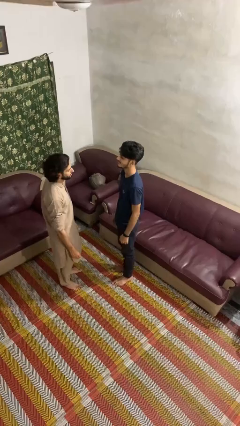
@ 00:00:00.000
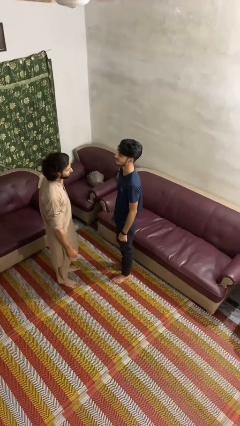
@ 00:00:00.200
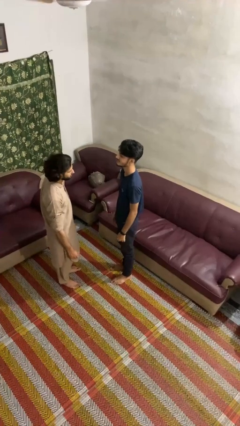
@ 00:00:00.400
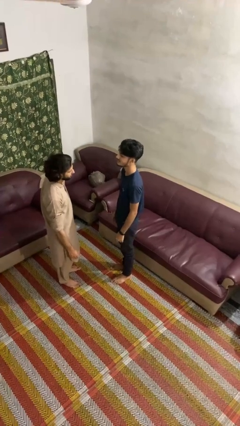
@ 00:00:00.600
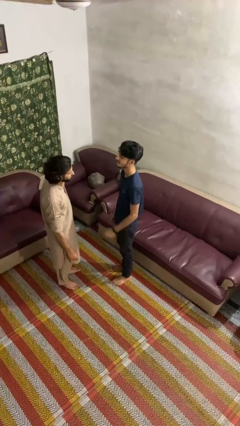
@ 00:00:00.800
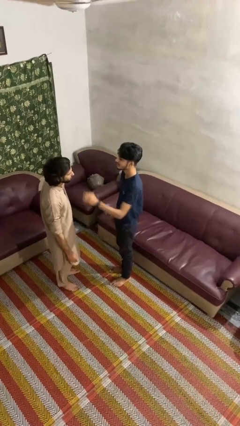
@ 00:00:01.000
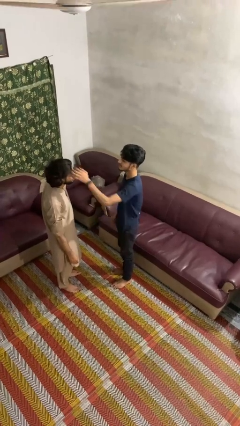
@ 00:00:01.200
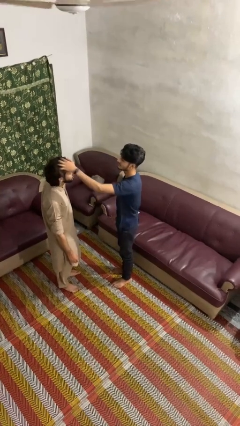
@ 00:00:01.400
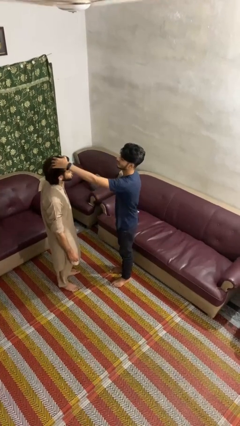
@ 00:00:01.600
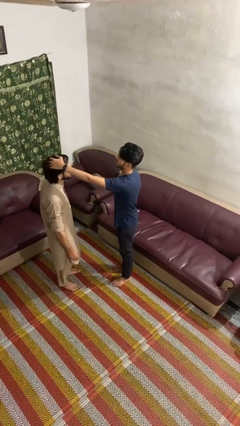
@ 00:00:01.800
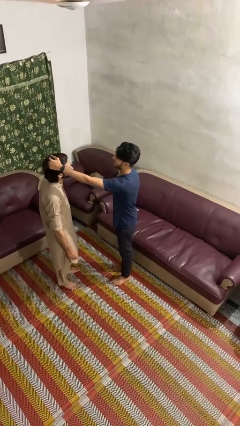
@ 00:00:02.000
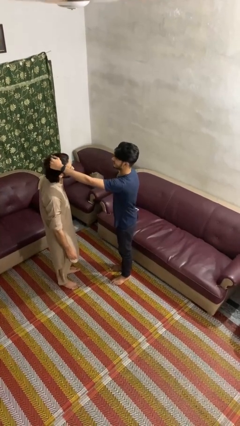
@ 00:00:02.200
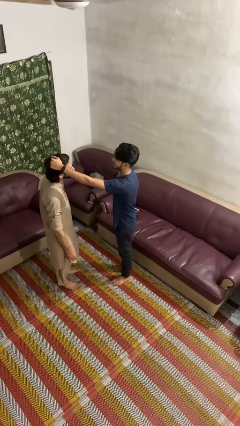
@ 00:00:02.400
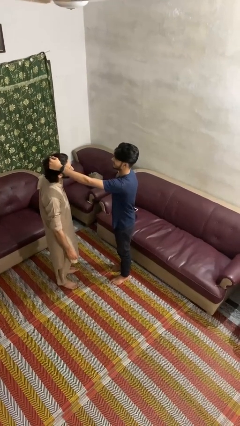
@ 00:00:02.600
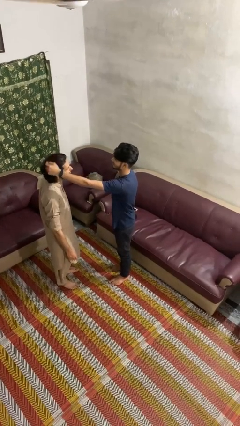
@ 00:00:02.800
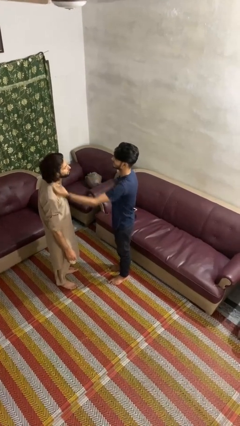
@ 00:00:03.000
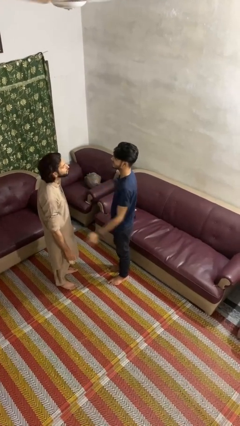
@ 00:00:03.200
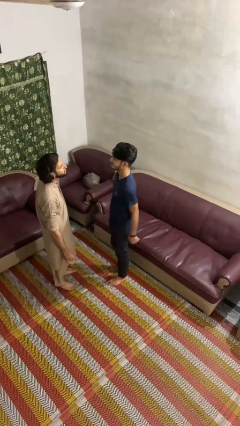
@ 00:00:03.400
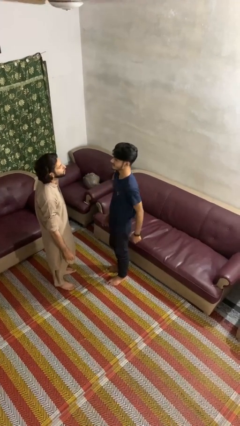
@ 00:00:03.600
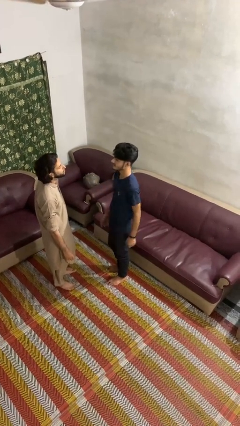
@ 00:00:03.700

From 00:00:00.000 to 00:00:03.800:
person grabs person by hair

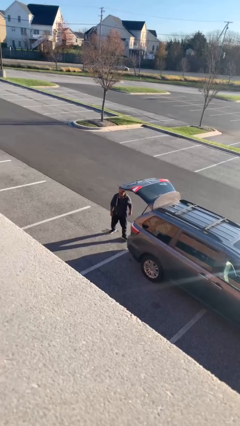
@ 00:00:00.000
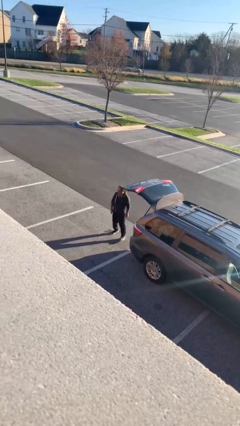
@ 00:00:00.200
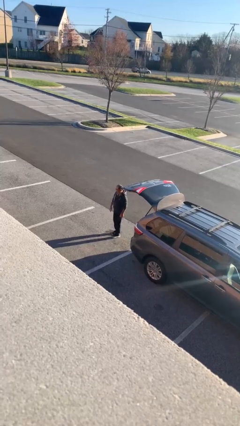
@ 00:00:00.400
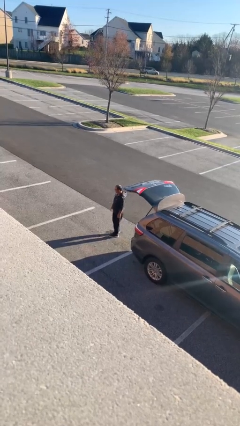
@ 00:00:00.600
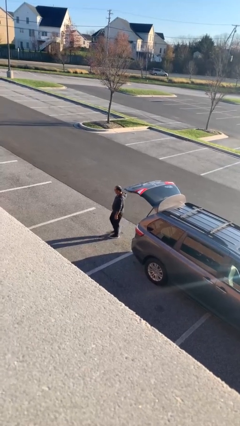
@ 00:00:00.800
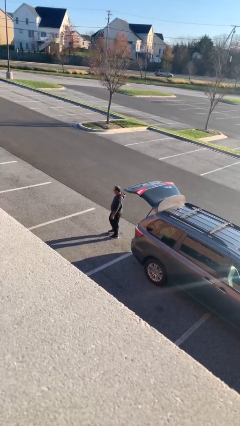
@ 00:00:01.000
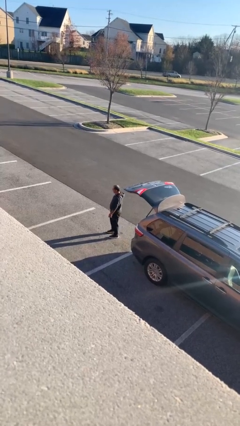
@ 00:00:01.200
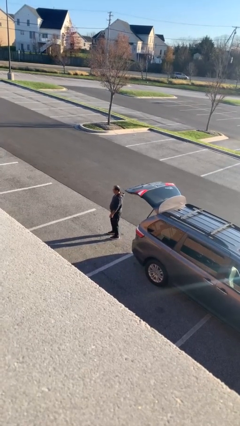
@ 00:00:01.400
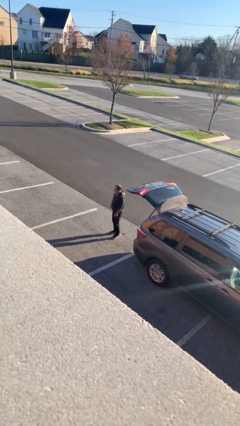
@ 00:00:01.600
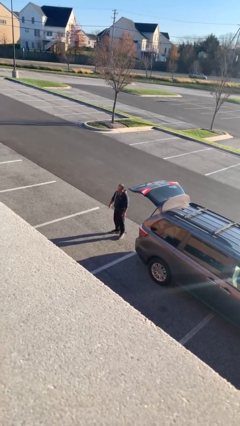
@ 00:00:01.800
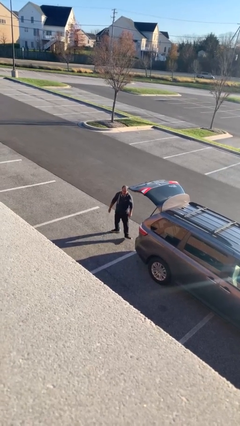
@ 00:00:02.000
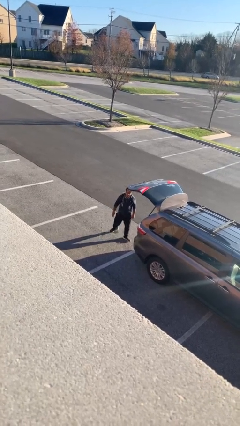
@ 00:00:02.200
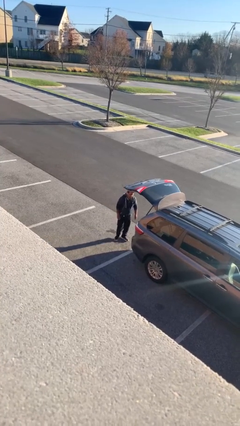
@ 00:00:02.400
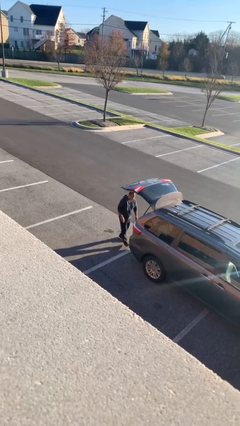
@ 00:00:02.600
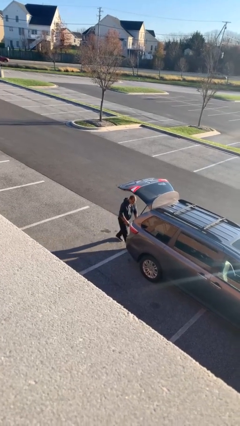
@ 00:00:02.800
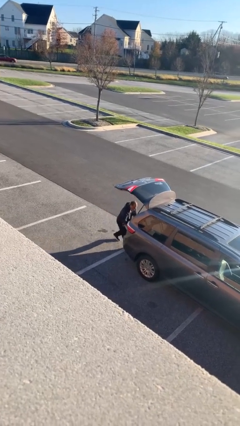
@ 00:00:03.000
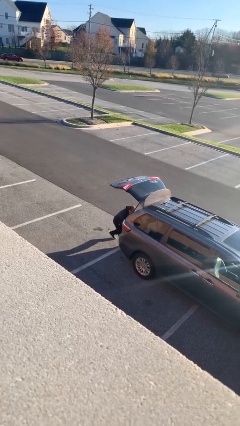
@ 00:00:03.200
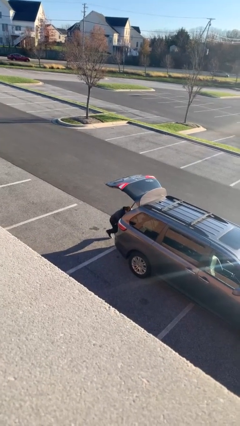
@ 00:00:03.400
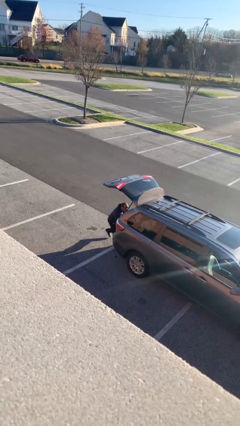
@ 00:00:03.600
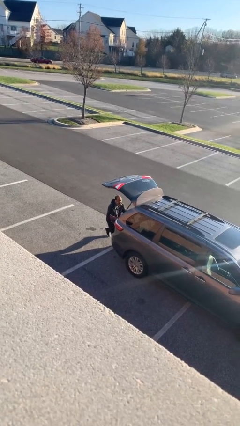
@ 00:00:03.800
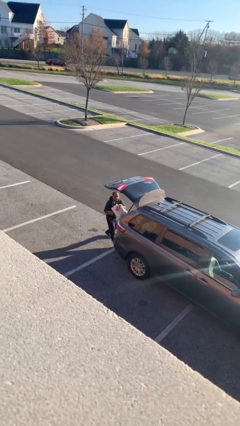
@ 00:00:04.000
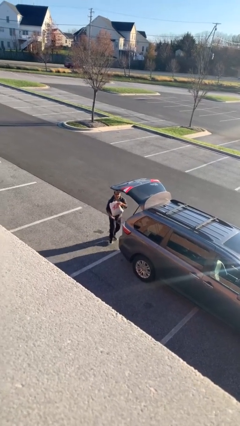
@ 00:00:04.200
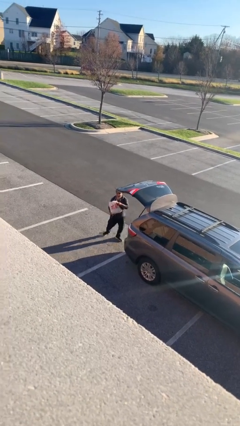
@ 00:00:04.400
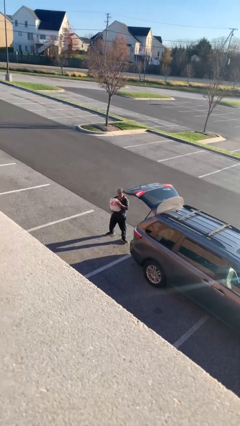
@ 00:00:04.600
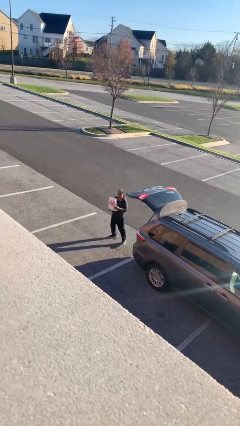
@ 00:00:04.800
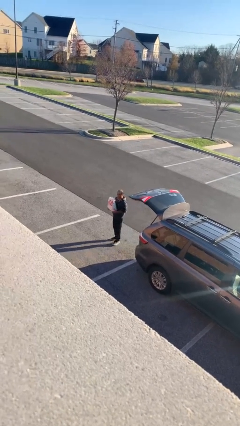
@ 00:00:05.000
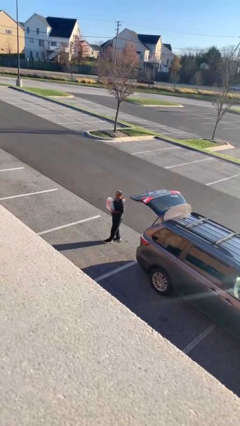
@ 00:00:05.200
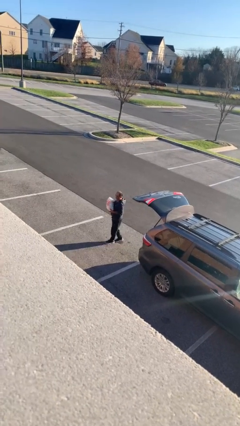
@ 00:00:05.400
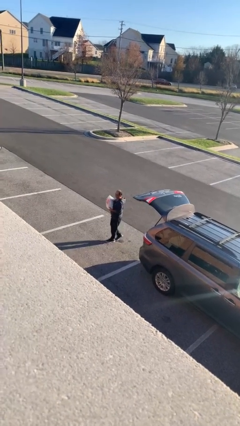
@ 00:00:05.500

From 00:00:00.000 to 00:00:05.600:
person unloads car

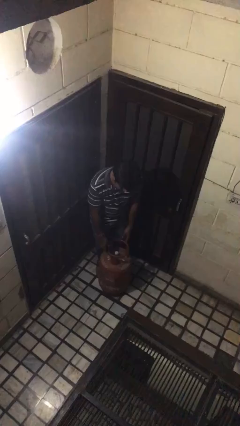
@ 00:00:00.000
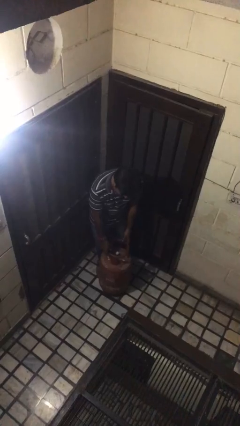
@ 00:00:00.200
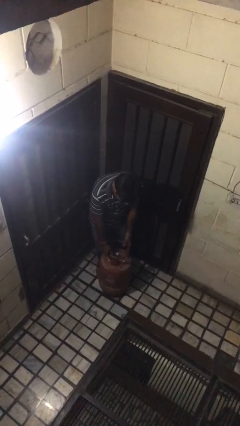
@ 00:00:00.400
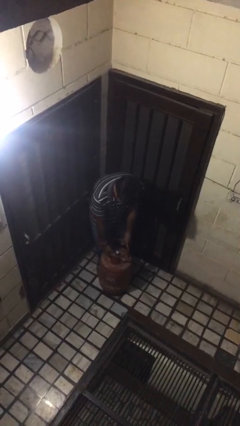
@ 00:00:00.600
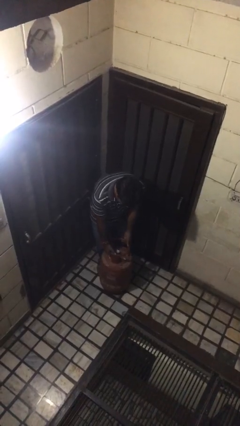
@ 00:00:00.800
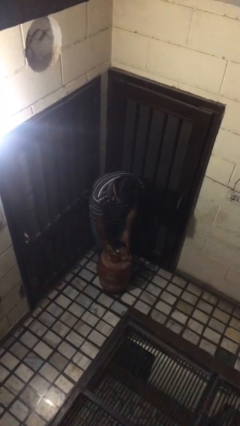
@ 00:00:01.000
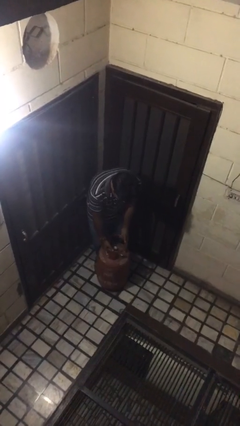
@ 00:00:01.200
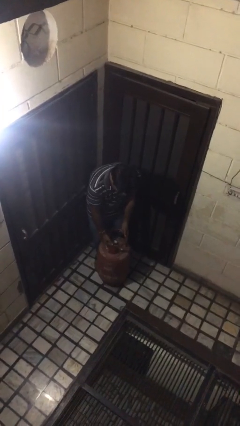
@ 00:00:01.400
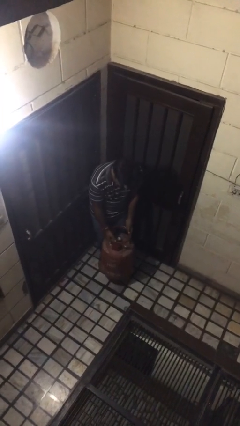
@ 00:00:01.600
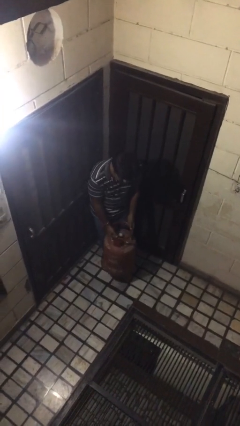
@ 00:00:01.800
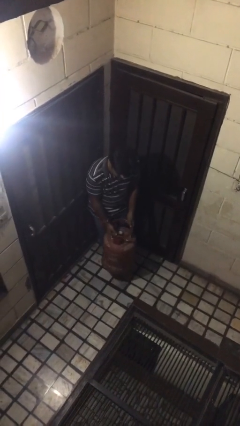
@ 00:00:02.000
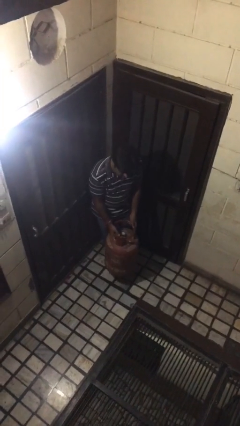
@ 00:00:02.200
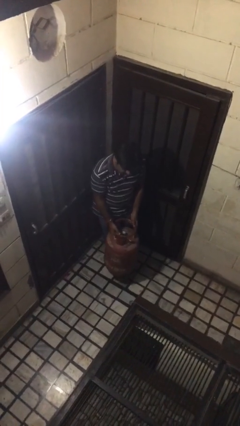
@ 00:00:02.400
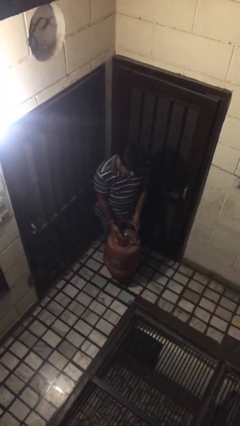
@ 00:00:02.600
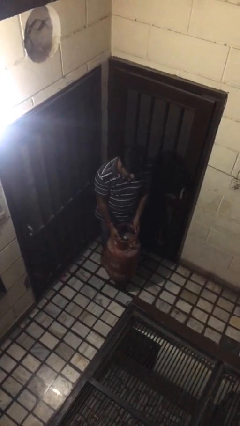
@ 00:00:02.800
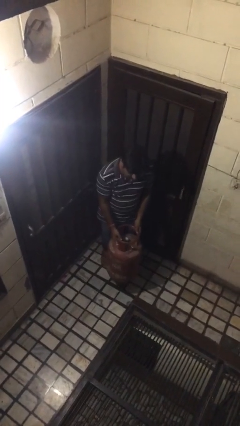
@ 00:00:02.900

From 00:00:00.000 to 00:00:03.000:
person picks up object from floor

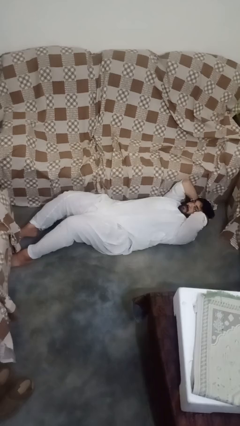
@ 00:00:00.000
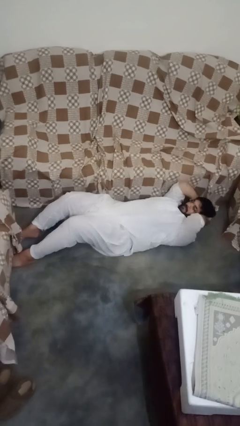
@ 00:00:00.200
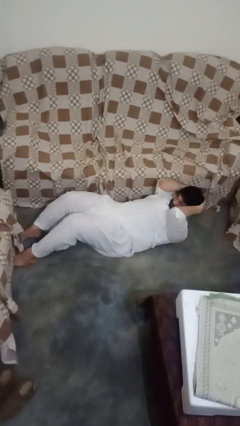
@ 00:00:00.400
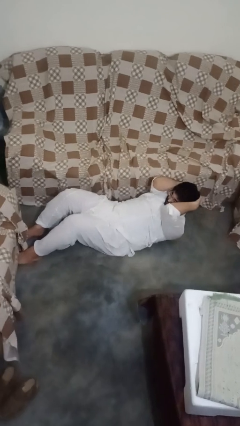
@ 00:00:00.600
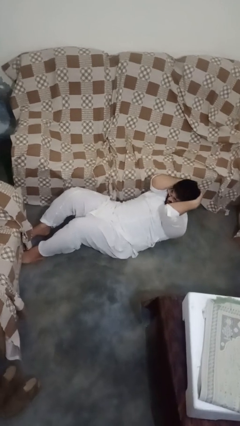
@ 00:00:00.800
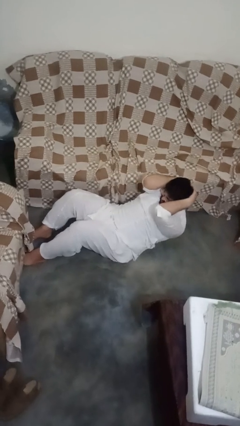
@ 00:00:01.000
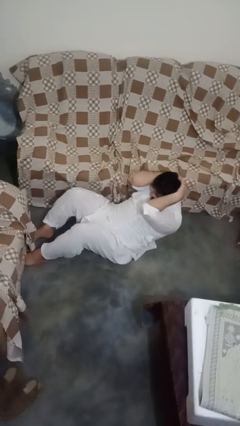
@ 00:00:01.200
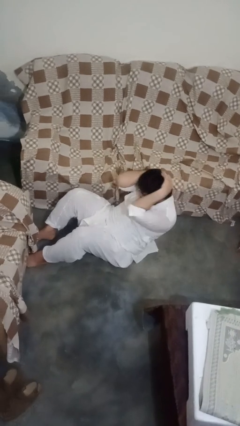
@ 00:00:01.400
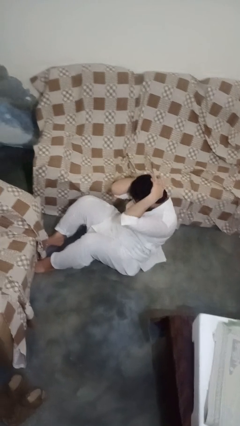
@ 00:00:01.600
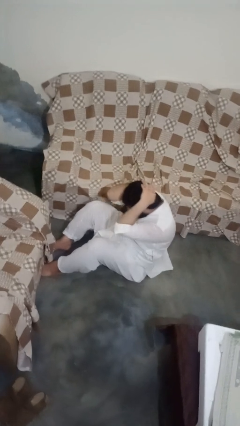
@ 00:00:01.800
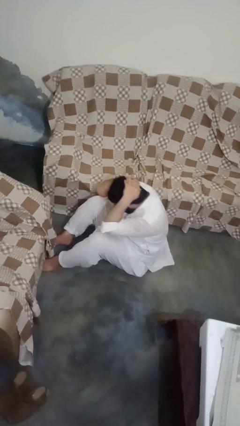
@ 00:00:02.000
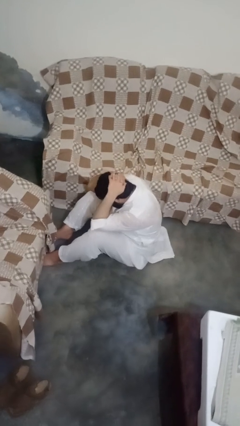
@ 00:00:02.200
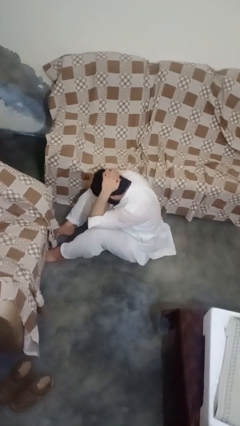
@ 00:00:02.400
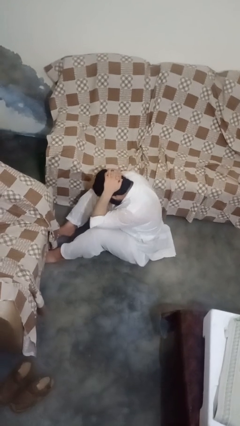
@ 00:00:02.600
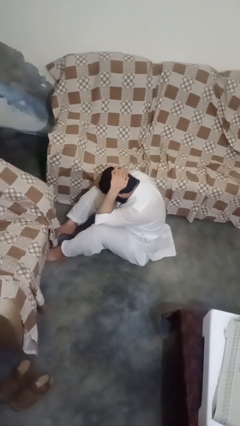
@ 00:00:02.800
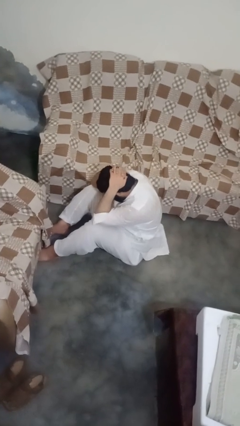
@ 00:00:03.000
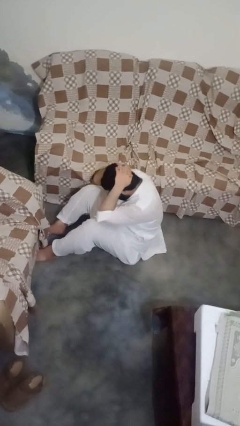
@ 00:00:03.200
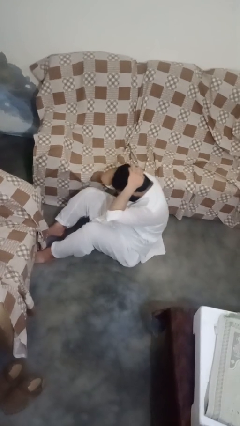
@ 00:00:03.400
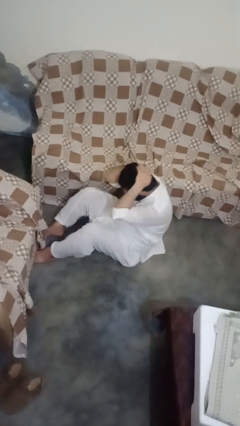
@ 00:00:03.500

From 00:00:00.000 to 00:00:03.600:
person exercises with situp

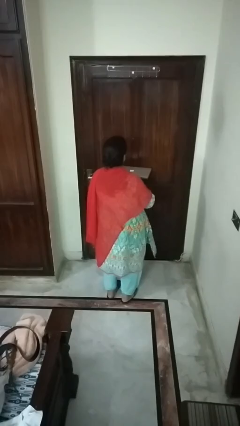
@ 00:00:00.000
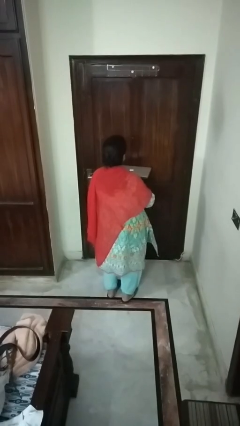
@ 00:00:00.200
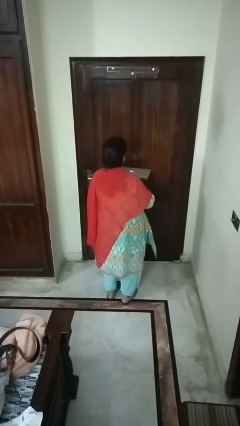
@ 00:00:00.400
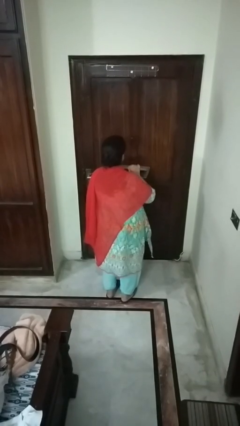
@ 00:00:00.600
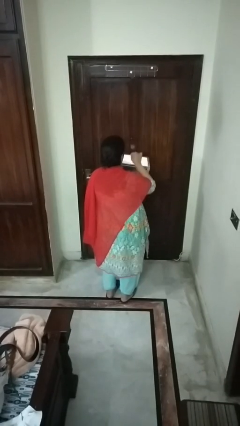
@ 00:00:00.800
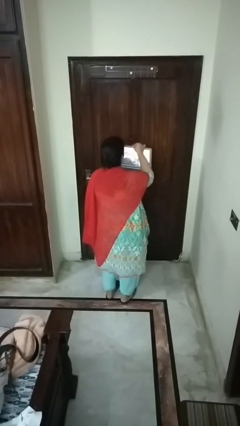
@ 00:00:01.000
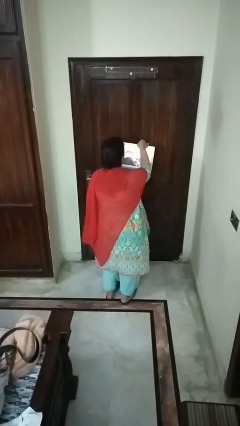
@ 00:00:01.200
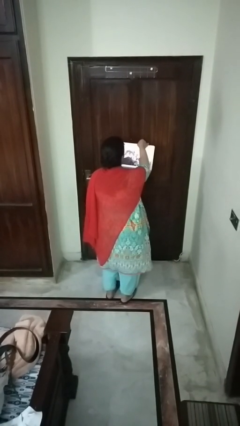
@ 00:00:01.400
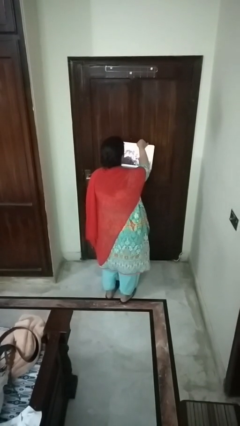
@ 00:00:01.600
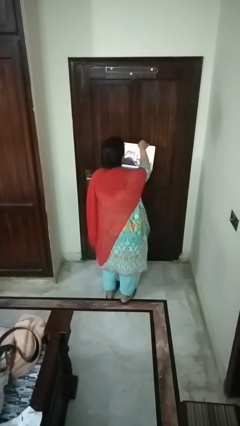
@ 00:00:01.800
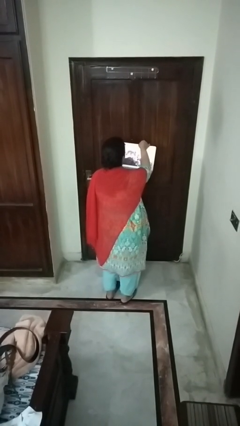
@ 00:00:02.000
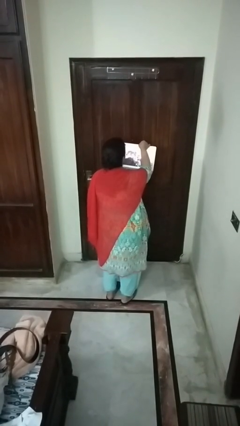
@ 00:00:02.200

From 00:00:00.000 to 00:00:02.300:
person opens laptop
